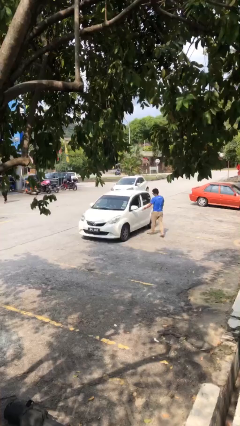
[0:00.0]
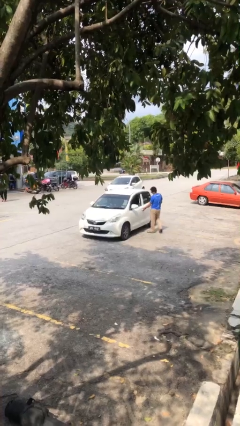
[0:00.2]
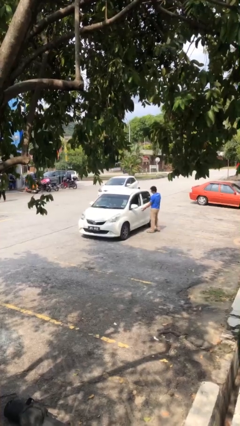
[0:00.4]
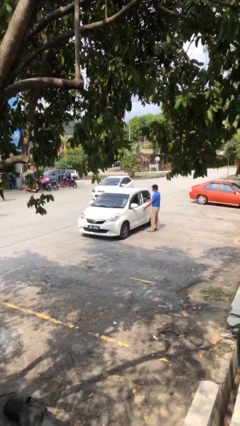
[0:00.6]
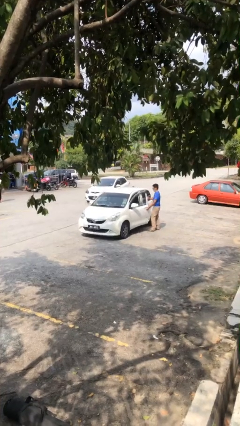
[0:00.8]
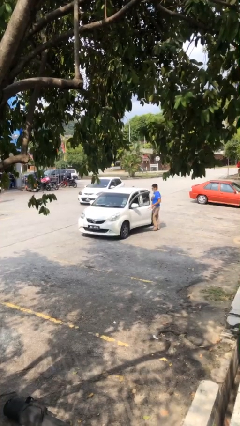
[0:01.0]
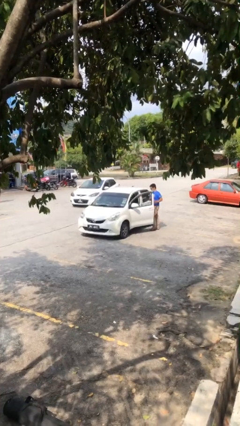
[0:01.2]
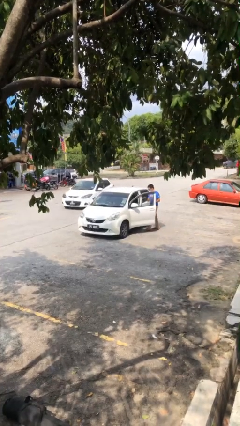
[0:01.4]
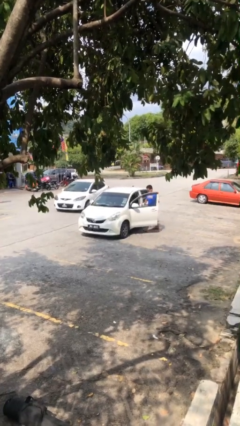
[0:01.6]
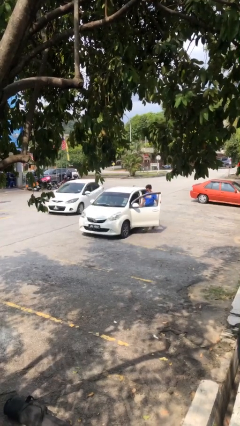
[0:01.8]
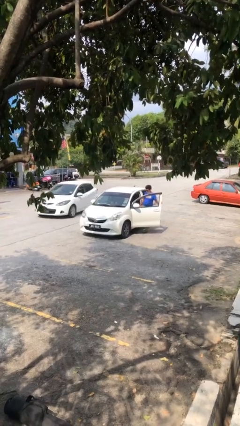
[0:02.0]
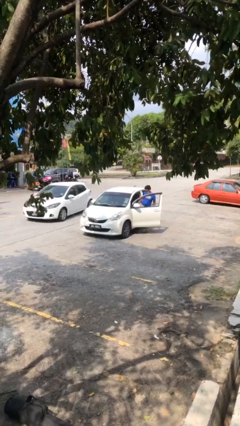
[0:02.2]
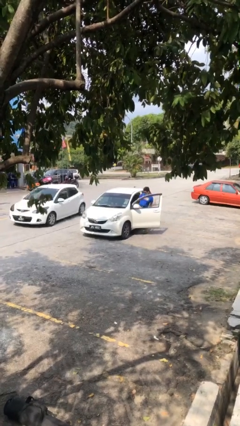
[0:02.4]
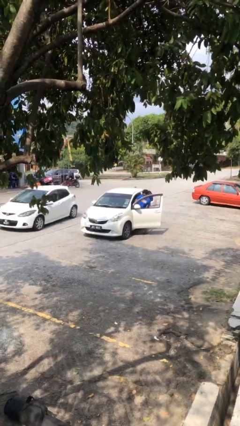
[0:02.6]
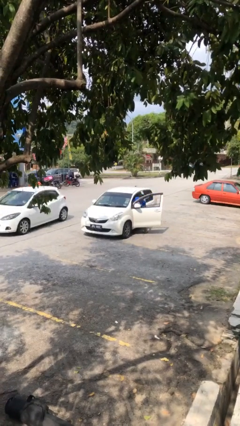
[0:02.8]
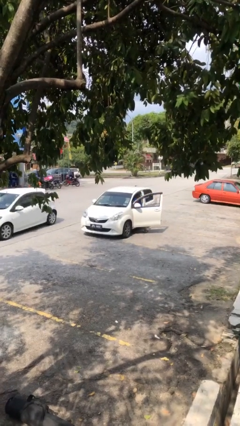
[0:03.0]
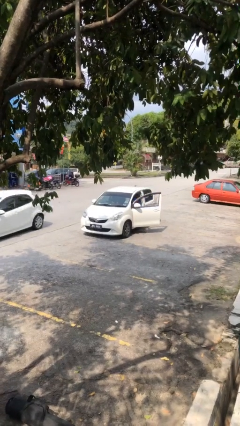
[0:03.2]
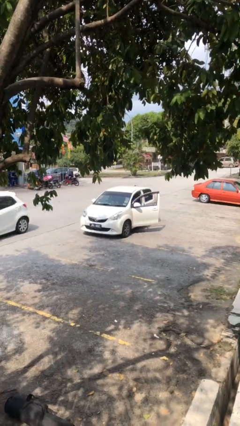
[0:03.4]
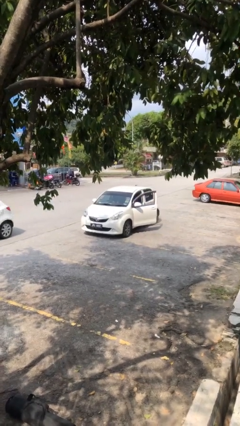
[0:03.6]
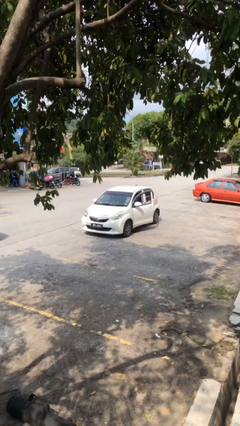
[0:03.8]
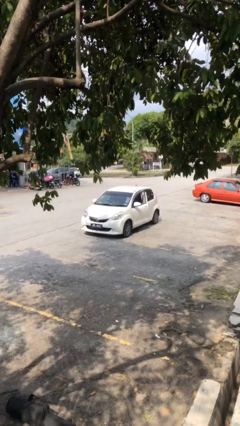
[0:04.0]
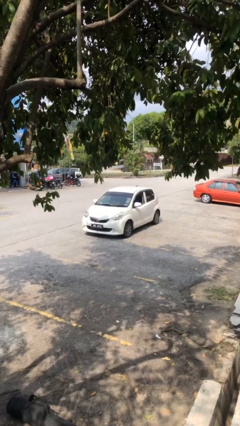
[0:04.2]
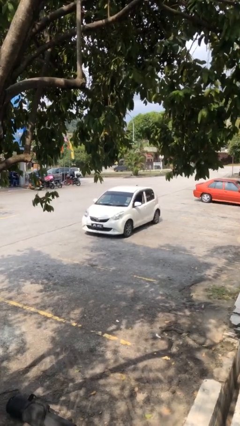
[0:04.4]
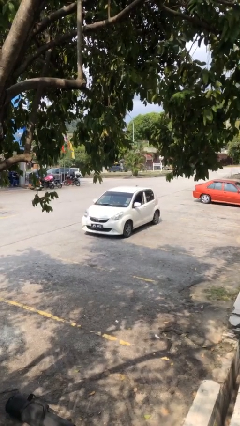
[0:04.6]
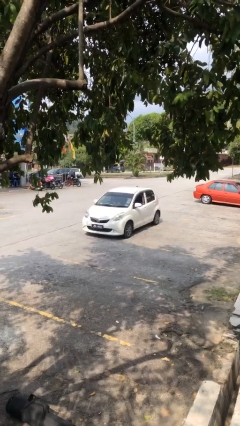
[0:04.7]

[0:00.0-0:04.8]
car picks up person

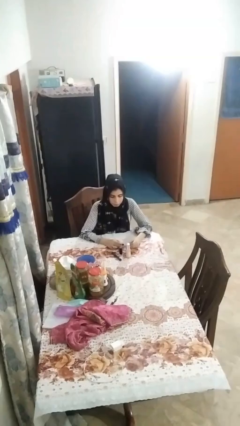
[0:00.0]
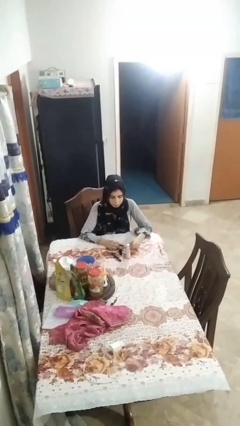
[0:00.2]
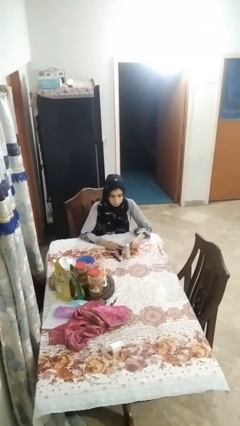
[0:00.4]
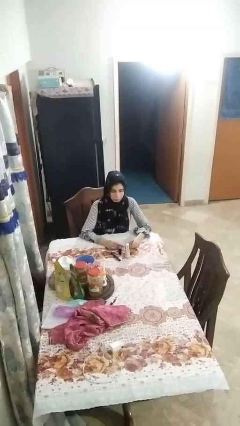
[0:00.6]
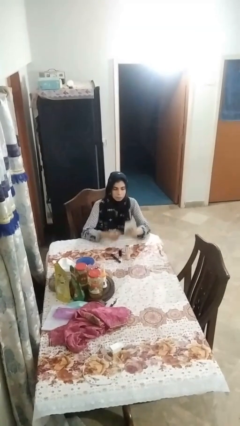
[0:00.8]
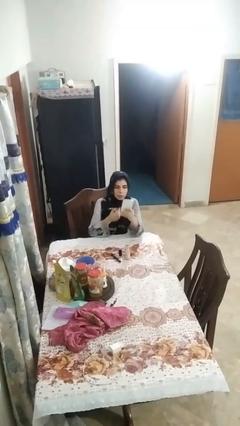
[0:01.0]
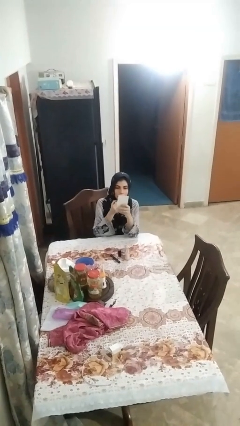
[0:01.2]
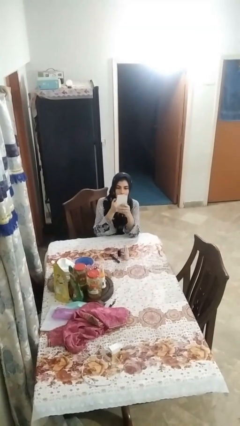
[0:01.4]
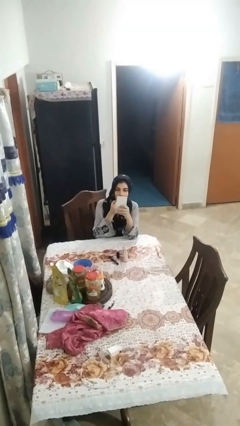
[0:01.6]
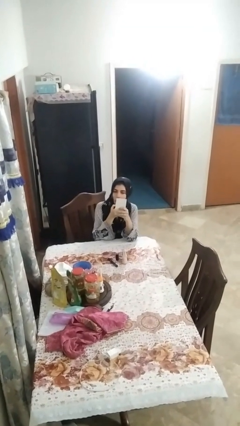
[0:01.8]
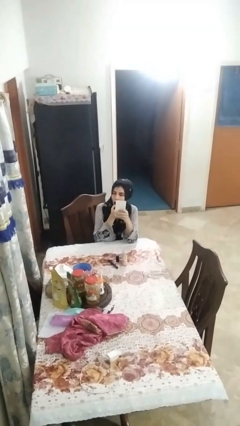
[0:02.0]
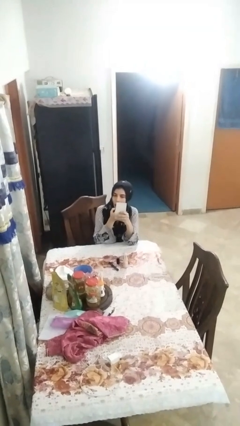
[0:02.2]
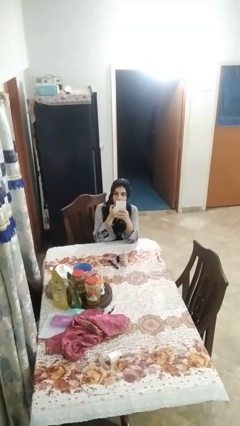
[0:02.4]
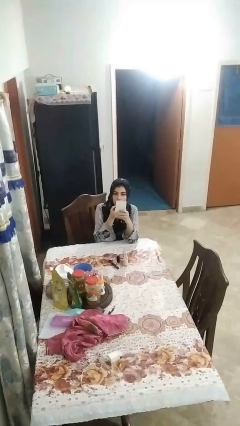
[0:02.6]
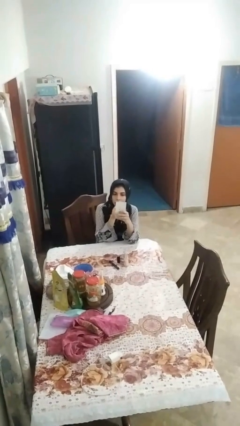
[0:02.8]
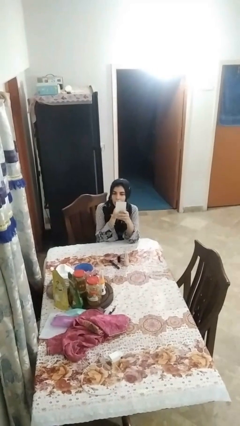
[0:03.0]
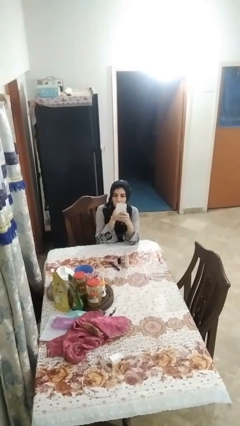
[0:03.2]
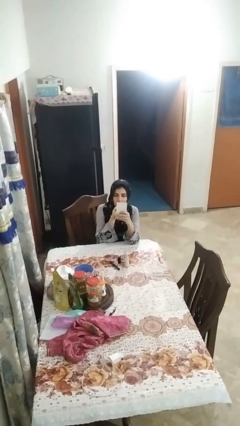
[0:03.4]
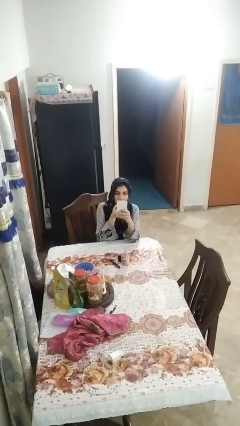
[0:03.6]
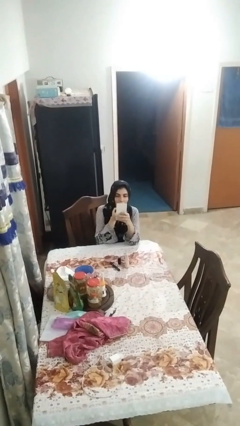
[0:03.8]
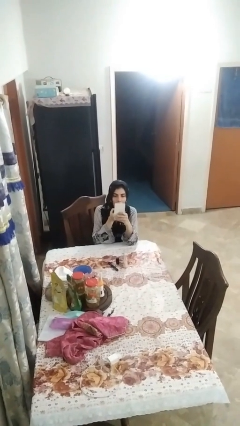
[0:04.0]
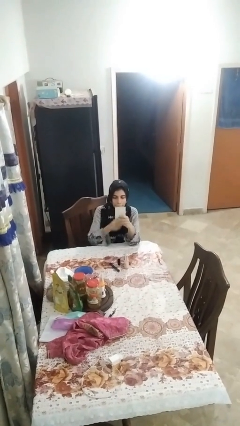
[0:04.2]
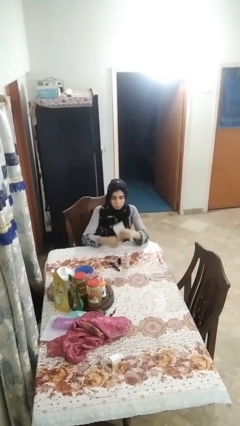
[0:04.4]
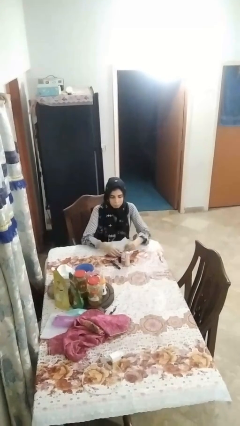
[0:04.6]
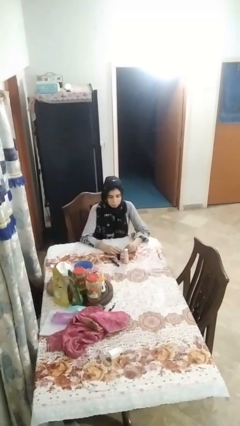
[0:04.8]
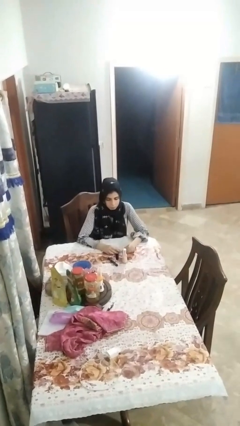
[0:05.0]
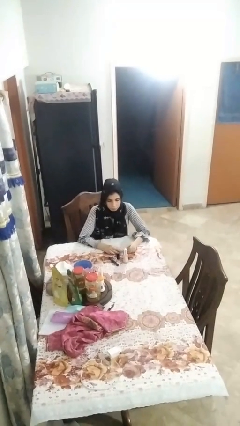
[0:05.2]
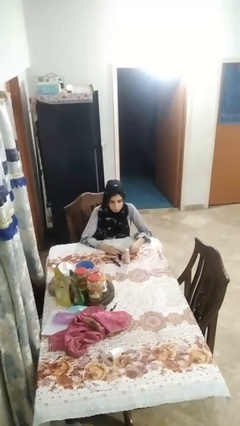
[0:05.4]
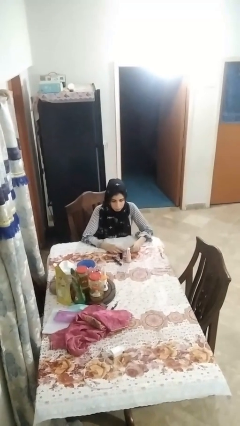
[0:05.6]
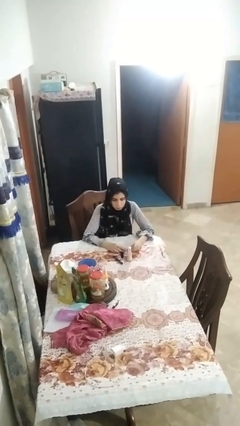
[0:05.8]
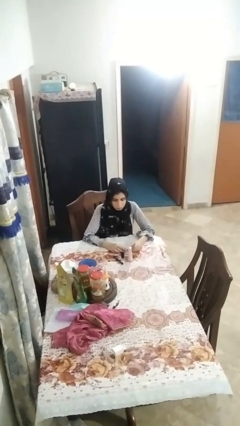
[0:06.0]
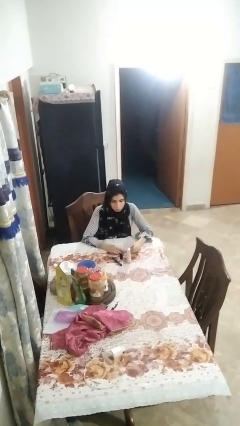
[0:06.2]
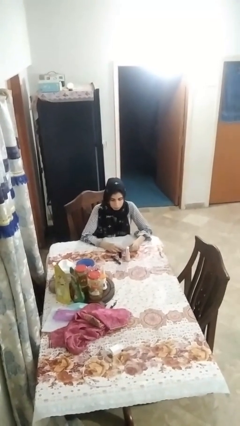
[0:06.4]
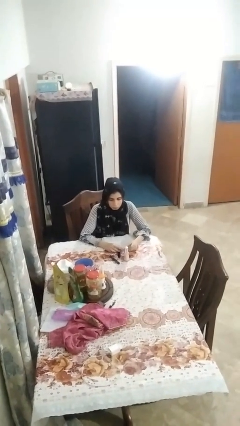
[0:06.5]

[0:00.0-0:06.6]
person applies lip makeup

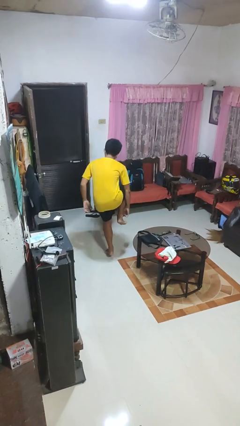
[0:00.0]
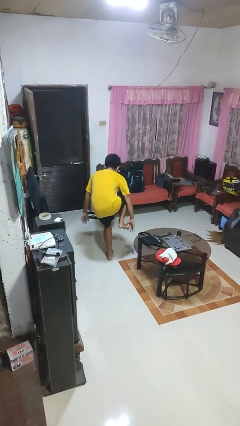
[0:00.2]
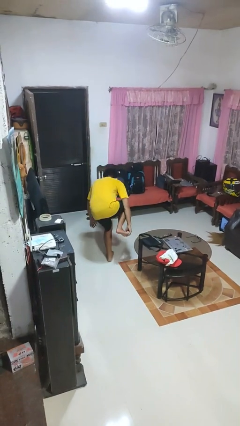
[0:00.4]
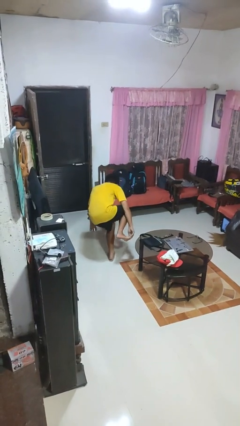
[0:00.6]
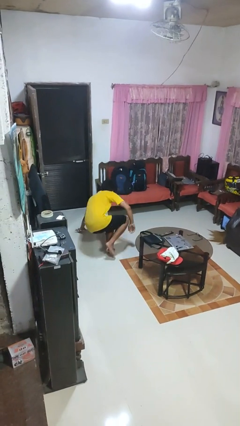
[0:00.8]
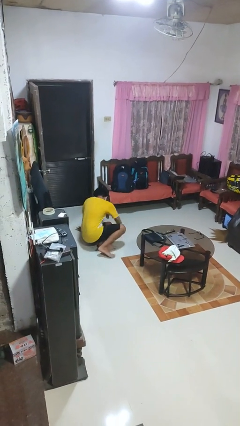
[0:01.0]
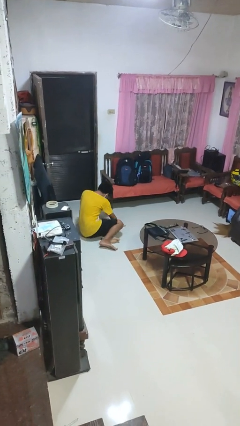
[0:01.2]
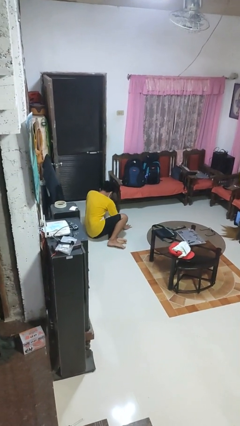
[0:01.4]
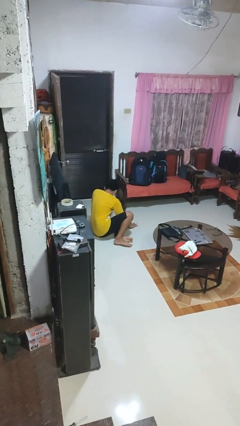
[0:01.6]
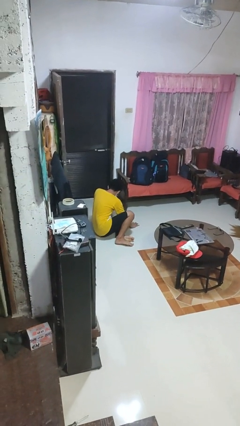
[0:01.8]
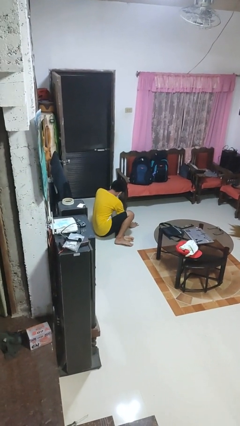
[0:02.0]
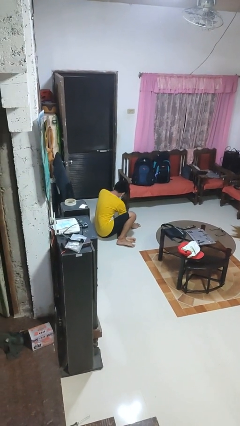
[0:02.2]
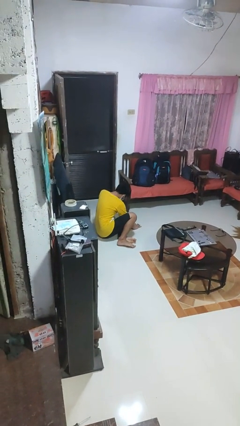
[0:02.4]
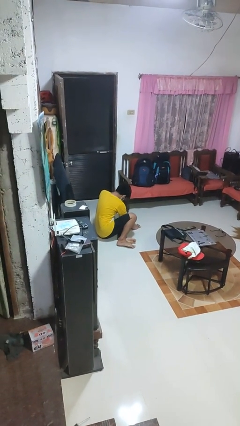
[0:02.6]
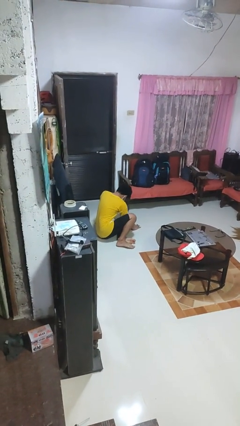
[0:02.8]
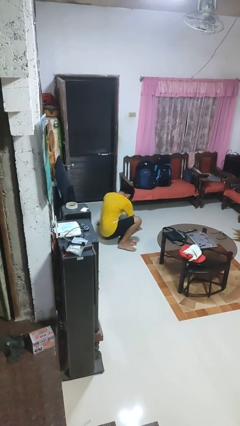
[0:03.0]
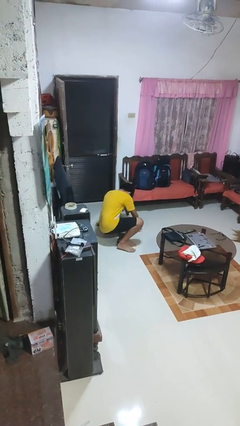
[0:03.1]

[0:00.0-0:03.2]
person lies down on floor

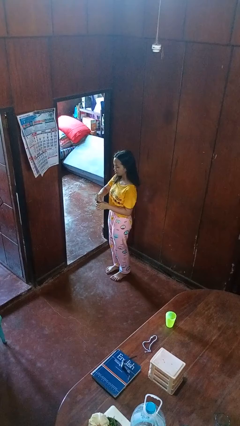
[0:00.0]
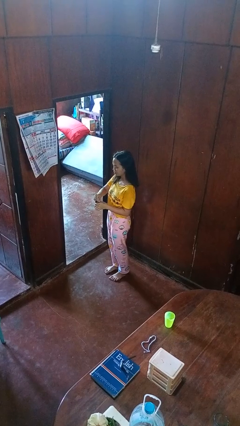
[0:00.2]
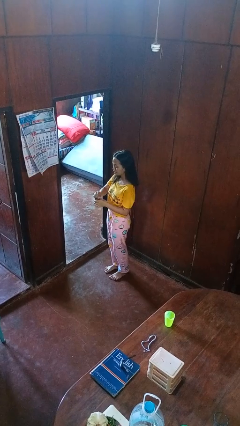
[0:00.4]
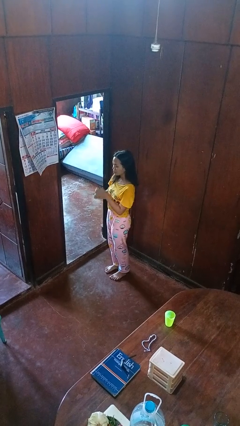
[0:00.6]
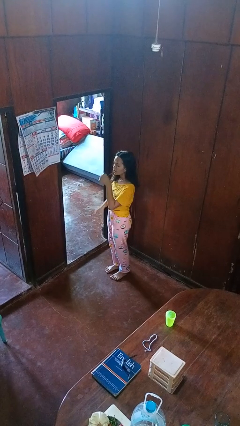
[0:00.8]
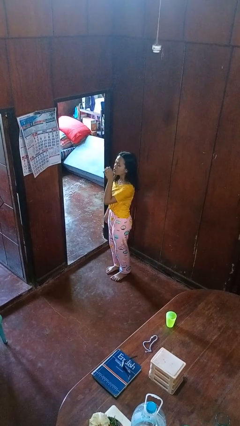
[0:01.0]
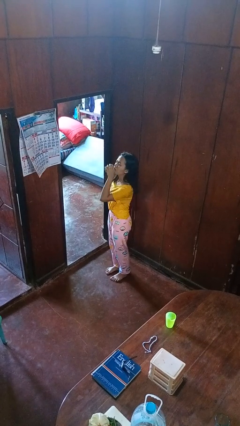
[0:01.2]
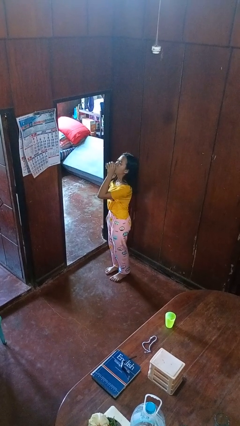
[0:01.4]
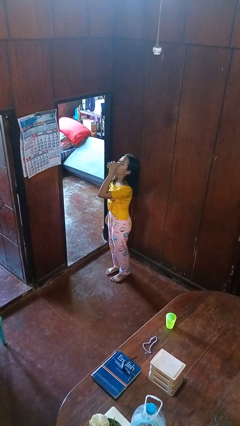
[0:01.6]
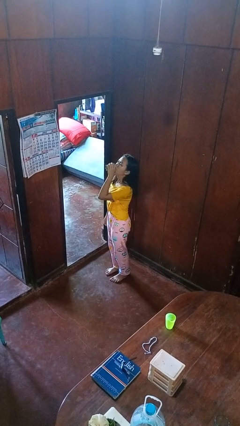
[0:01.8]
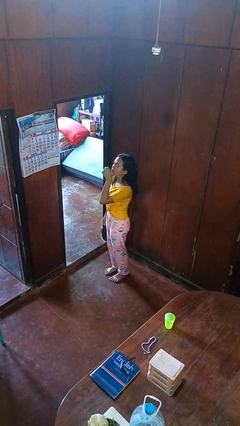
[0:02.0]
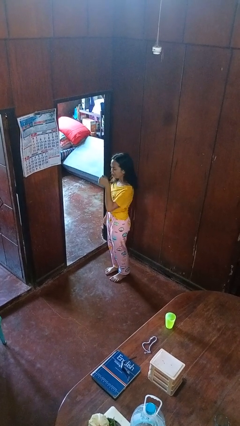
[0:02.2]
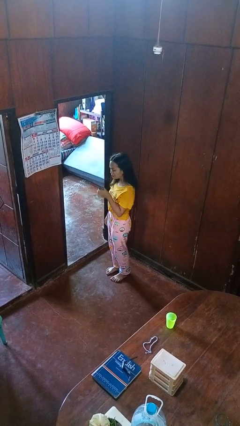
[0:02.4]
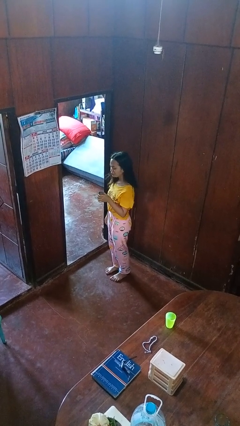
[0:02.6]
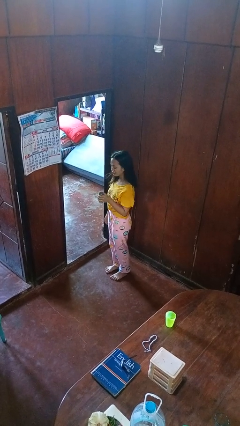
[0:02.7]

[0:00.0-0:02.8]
person drinks from beverage can
